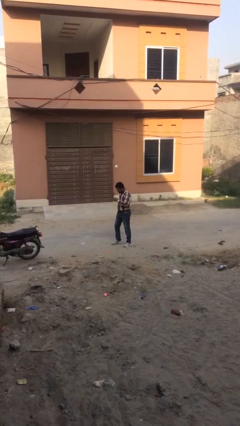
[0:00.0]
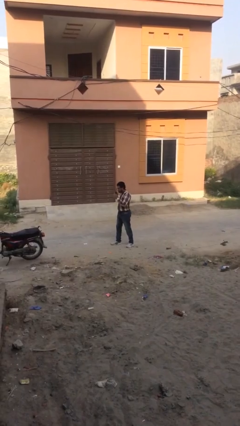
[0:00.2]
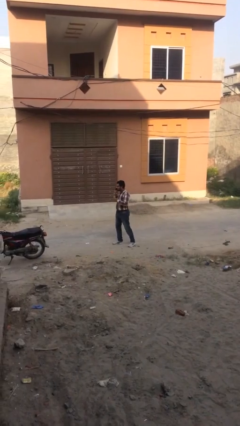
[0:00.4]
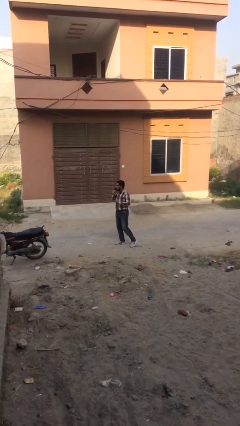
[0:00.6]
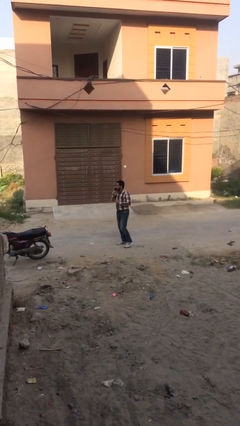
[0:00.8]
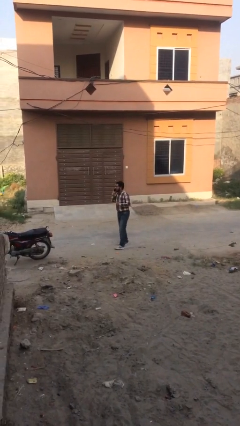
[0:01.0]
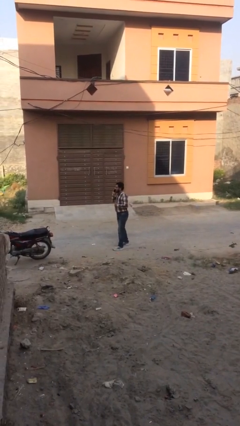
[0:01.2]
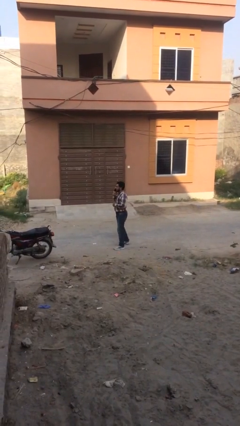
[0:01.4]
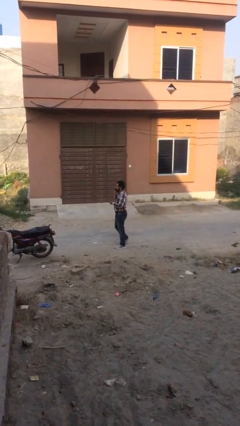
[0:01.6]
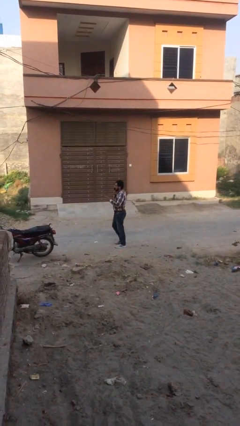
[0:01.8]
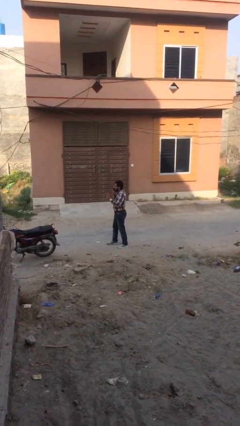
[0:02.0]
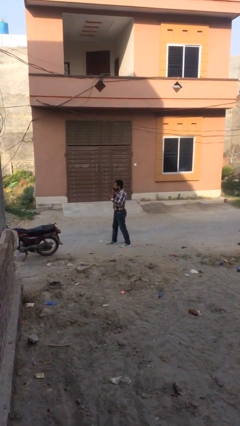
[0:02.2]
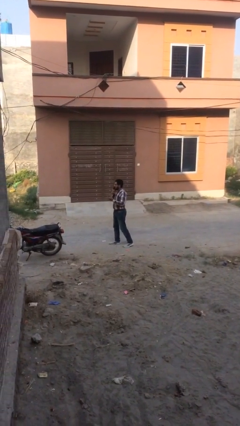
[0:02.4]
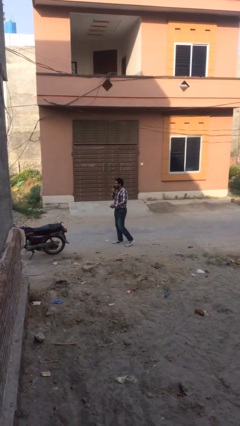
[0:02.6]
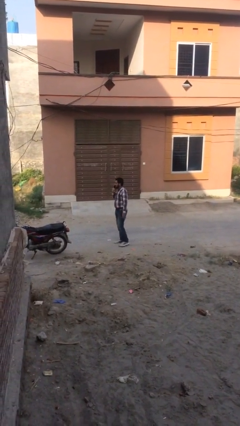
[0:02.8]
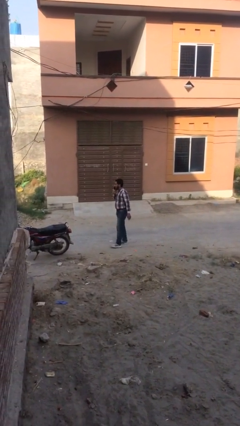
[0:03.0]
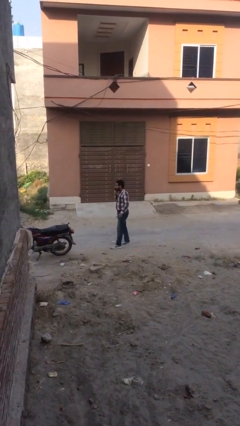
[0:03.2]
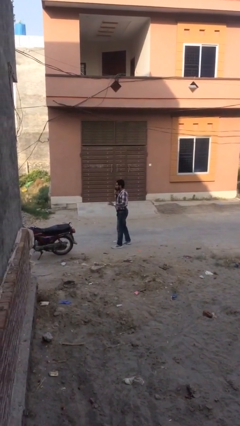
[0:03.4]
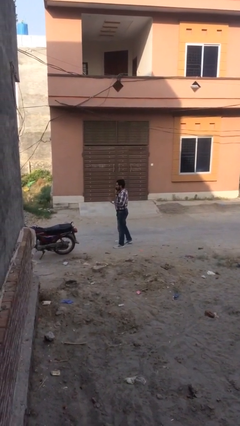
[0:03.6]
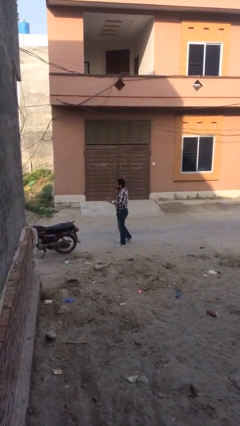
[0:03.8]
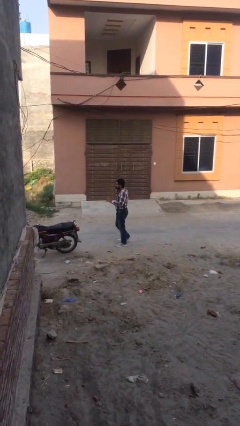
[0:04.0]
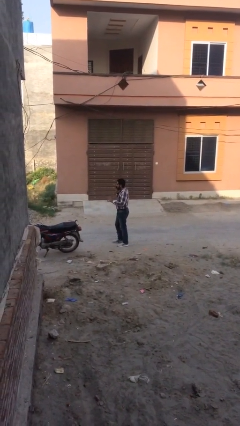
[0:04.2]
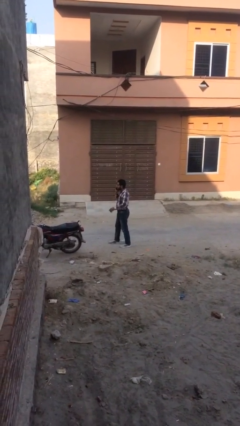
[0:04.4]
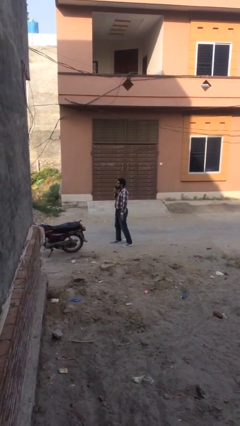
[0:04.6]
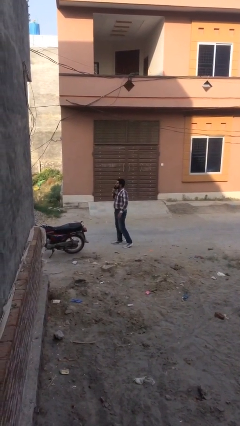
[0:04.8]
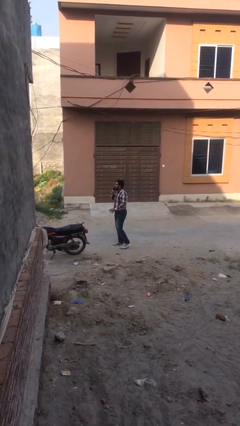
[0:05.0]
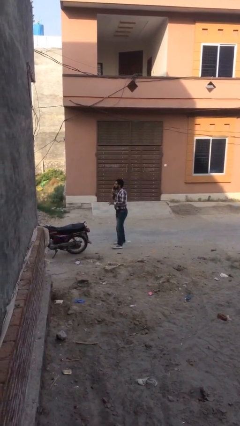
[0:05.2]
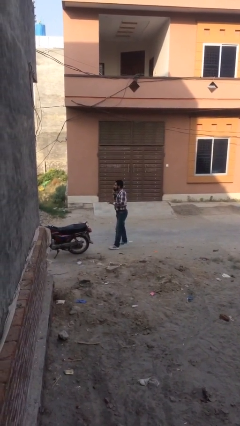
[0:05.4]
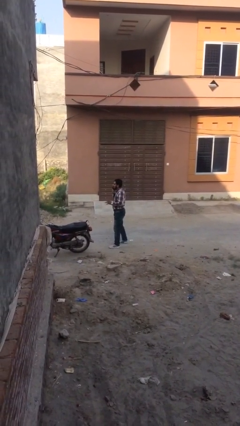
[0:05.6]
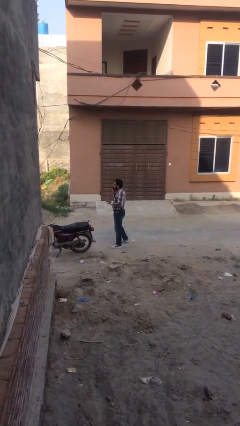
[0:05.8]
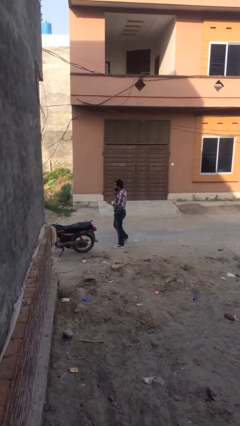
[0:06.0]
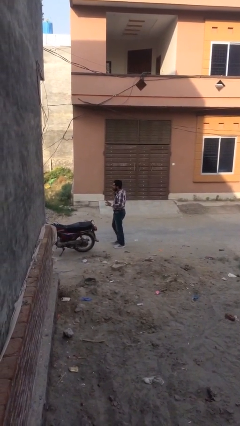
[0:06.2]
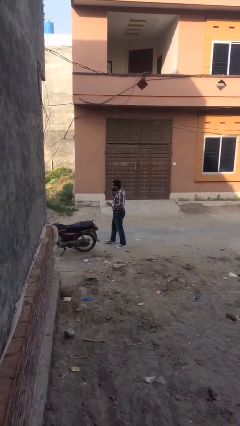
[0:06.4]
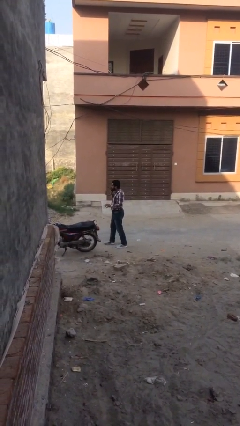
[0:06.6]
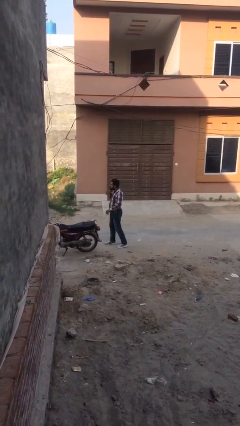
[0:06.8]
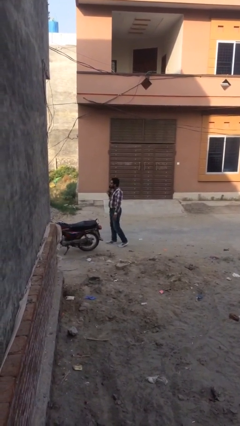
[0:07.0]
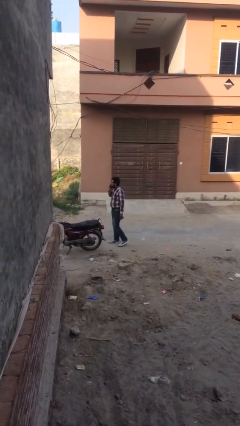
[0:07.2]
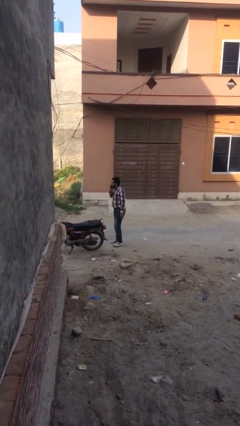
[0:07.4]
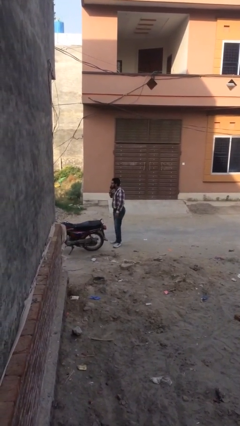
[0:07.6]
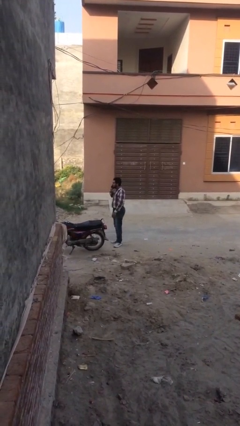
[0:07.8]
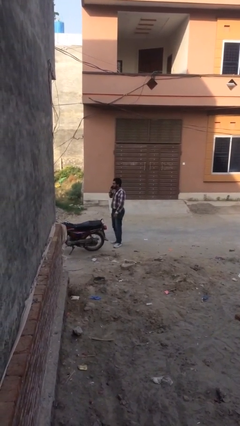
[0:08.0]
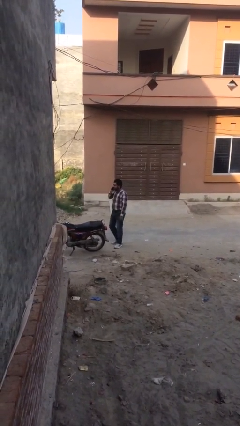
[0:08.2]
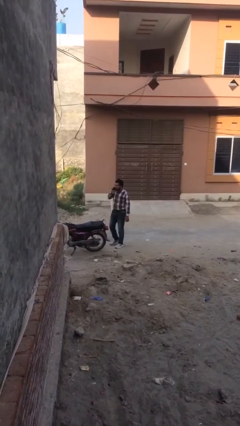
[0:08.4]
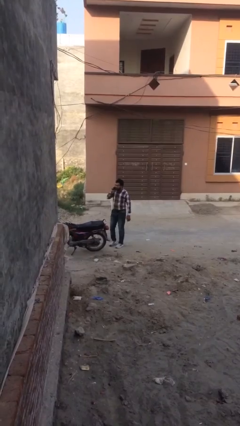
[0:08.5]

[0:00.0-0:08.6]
person talks on phone

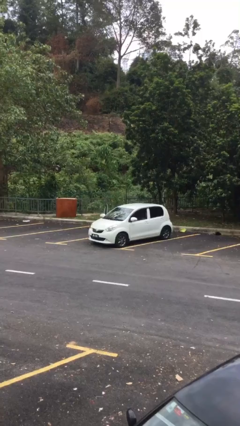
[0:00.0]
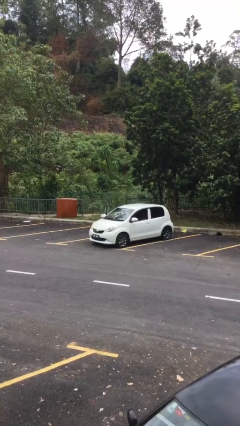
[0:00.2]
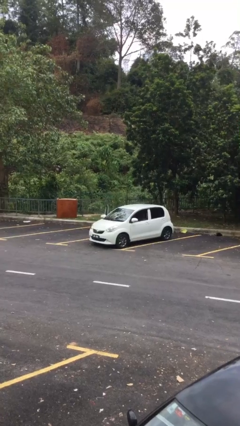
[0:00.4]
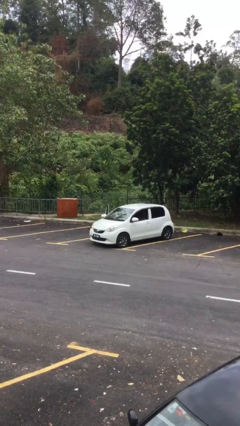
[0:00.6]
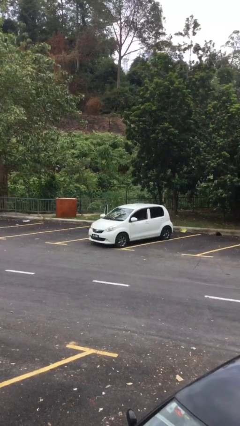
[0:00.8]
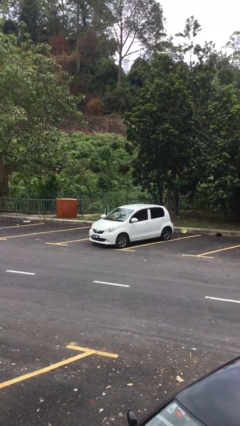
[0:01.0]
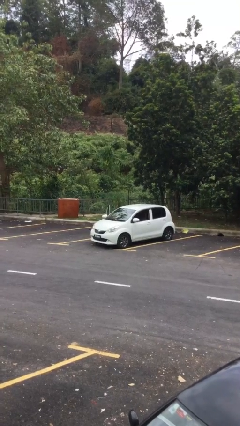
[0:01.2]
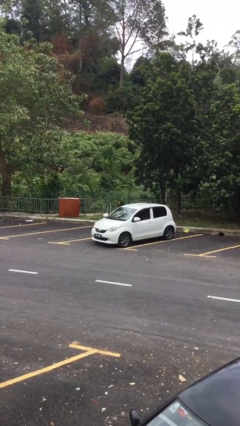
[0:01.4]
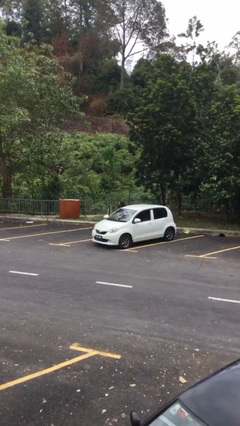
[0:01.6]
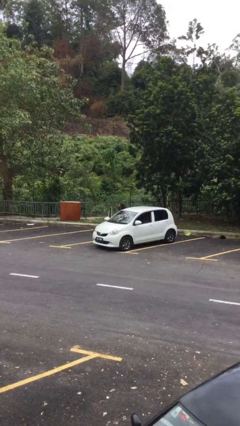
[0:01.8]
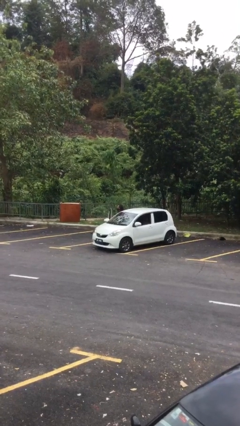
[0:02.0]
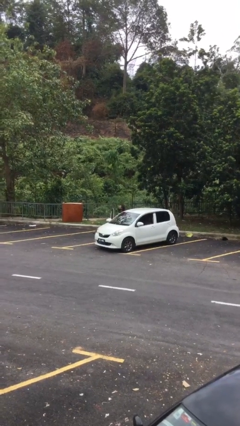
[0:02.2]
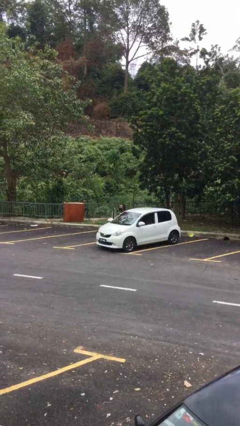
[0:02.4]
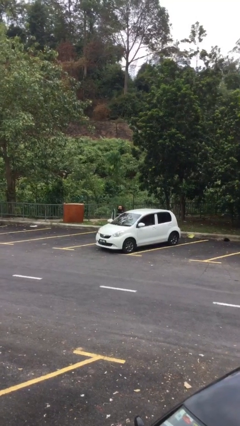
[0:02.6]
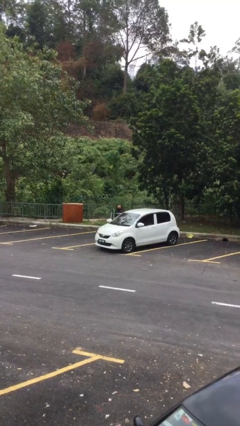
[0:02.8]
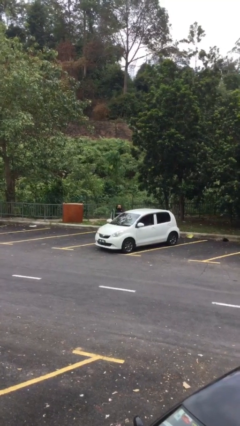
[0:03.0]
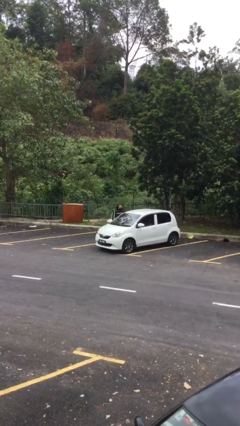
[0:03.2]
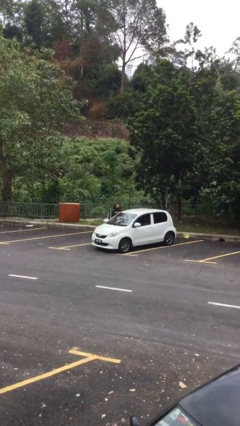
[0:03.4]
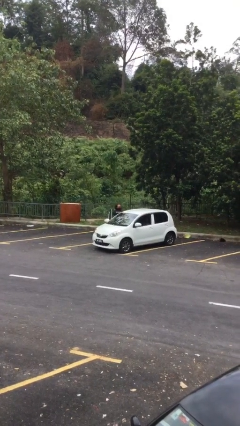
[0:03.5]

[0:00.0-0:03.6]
person exits car

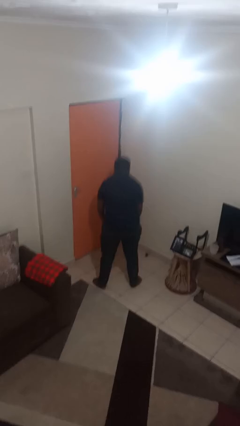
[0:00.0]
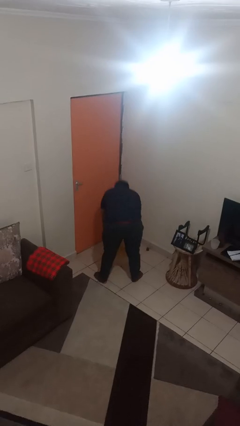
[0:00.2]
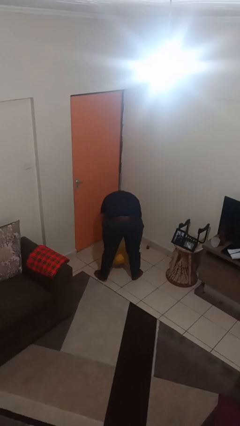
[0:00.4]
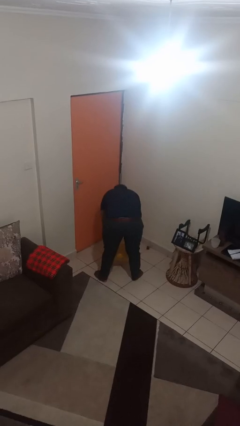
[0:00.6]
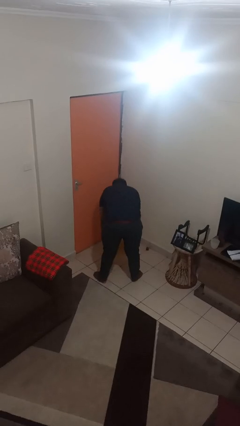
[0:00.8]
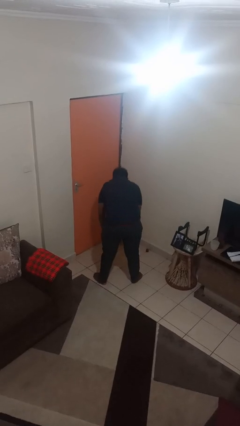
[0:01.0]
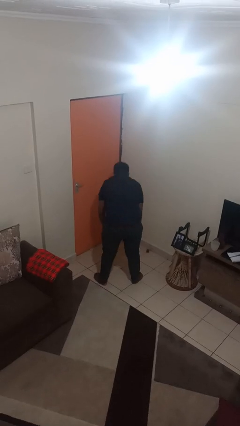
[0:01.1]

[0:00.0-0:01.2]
person catches dropped object

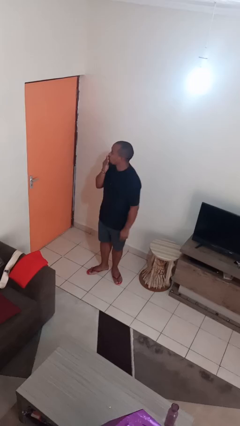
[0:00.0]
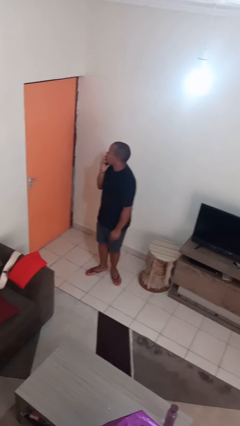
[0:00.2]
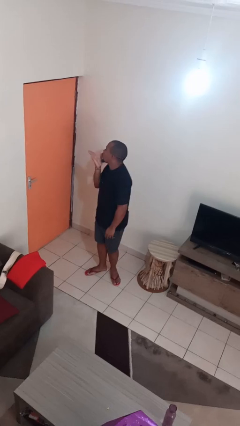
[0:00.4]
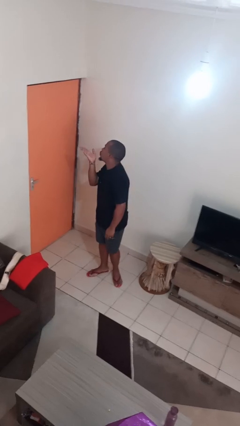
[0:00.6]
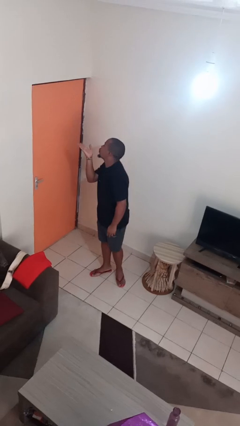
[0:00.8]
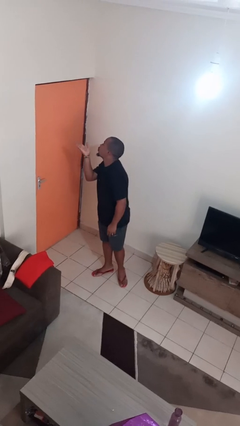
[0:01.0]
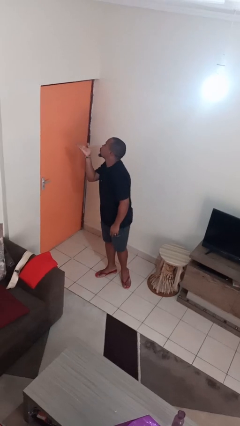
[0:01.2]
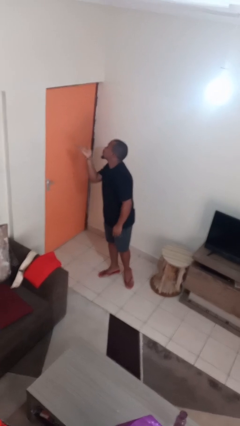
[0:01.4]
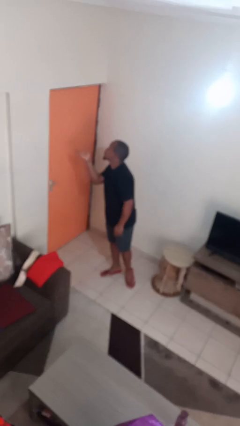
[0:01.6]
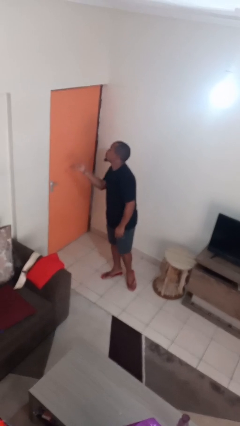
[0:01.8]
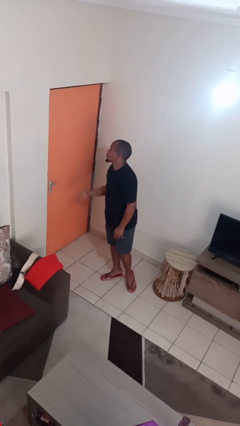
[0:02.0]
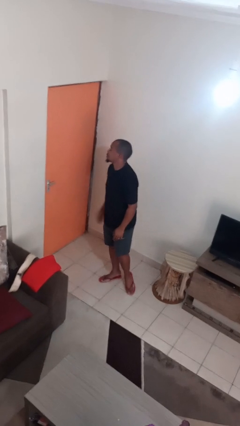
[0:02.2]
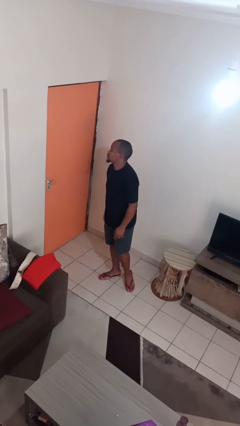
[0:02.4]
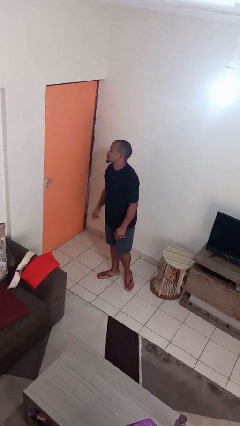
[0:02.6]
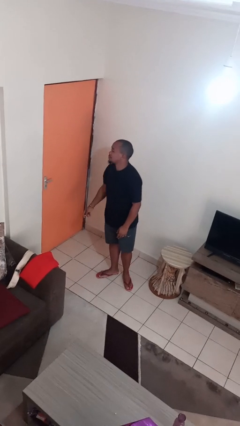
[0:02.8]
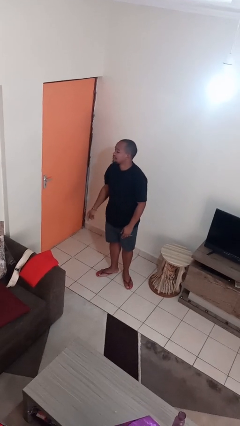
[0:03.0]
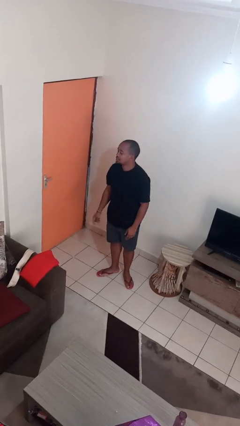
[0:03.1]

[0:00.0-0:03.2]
person gestures blow kiss

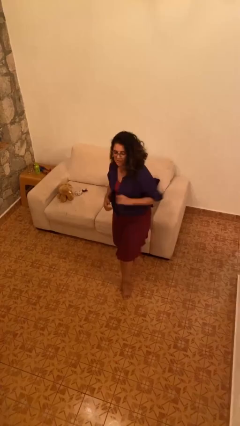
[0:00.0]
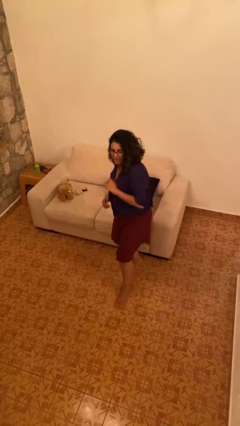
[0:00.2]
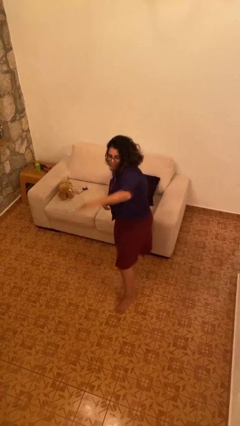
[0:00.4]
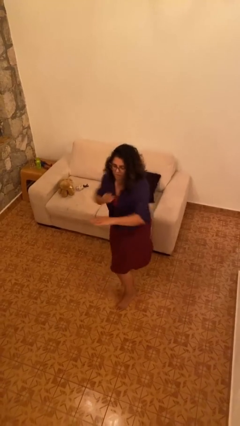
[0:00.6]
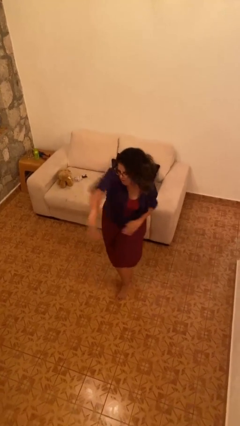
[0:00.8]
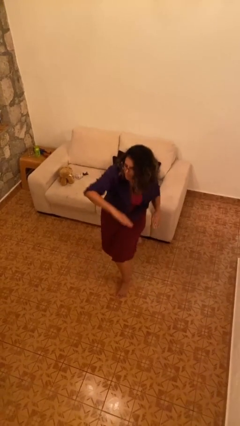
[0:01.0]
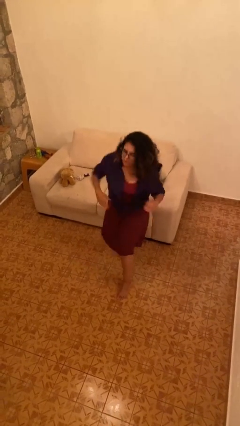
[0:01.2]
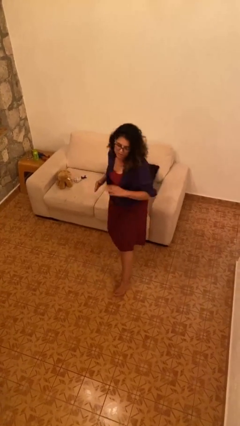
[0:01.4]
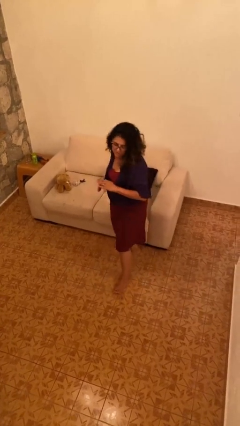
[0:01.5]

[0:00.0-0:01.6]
person karate chop
